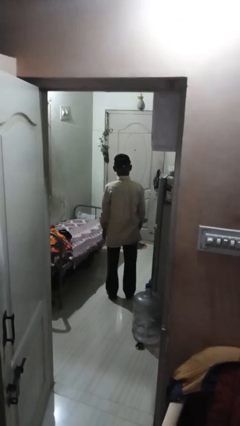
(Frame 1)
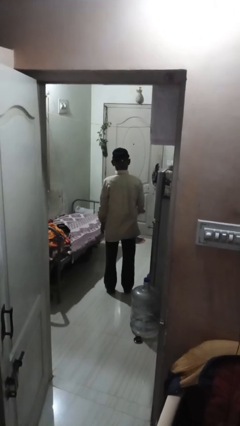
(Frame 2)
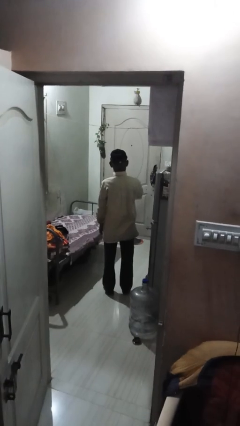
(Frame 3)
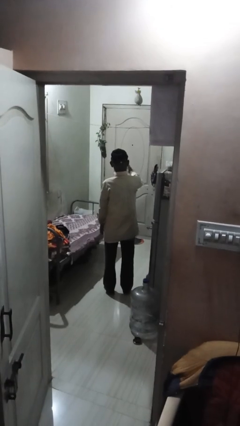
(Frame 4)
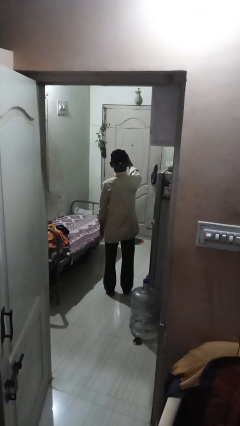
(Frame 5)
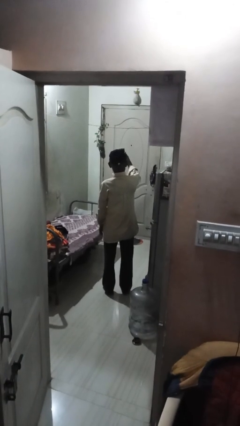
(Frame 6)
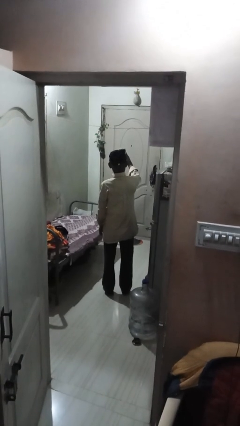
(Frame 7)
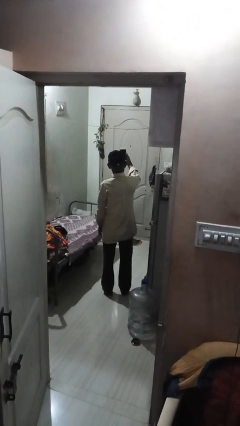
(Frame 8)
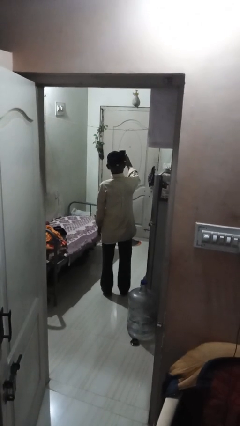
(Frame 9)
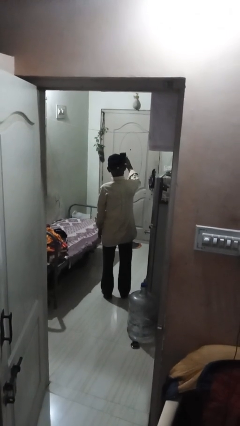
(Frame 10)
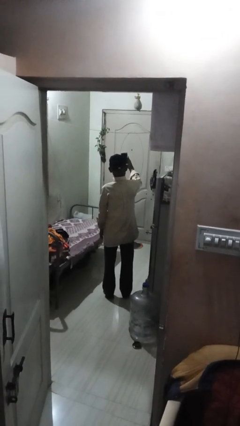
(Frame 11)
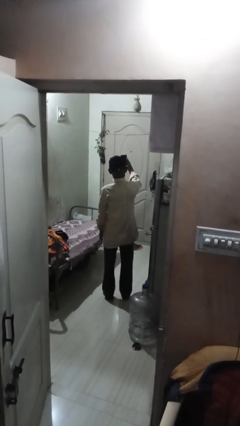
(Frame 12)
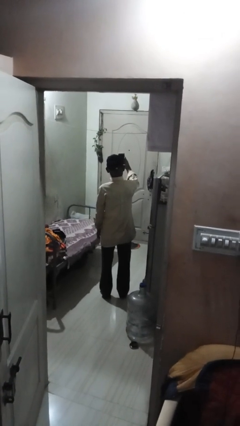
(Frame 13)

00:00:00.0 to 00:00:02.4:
person takes selfie

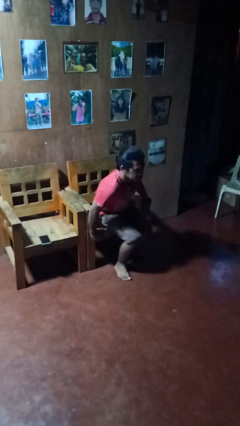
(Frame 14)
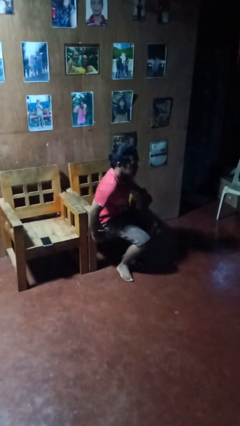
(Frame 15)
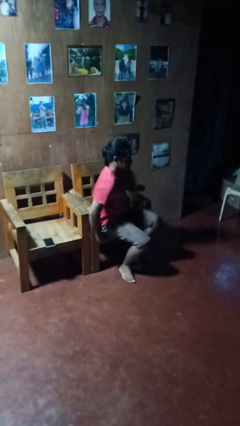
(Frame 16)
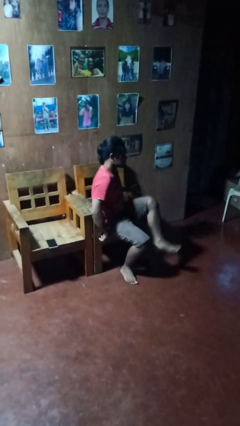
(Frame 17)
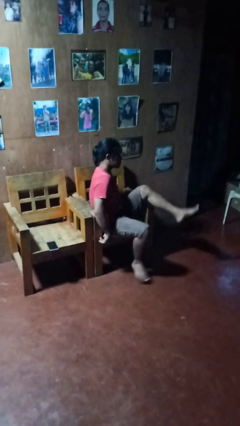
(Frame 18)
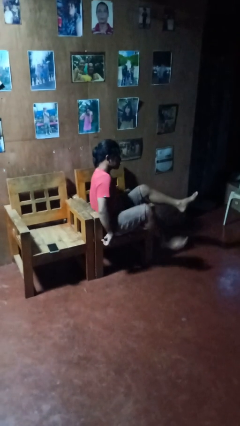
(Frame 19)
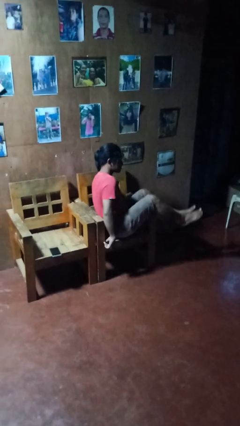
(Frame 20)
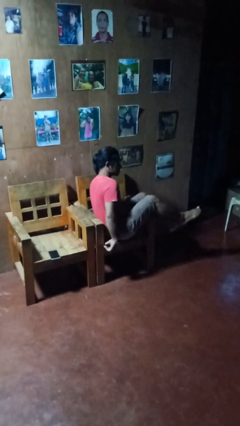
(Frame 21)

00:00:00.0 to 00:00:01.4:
person sits down

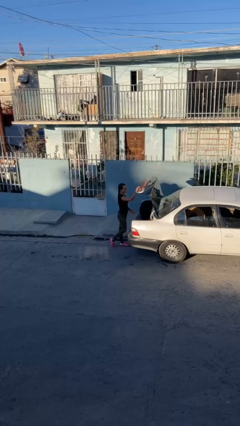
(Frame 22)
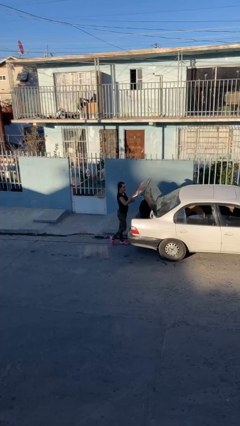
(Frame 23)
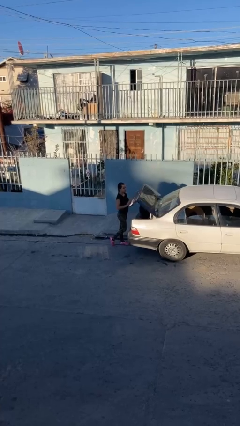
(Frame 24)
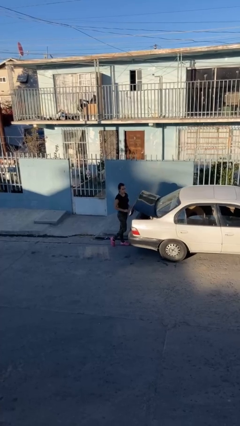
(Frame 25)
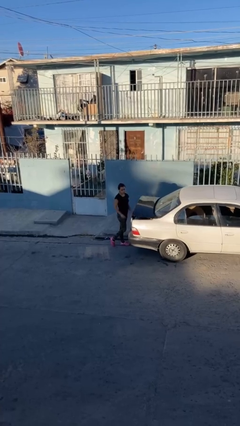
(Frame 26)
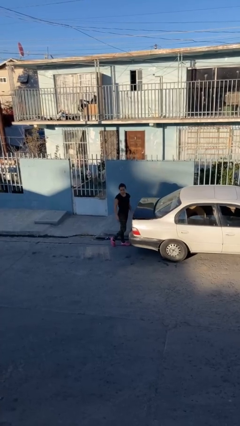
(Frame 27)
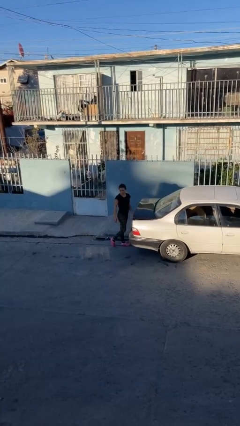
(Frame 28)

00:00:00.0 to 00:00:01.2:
person closes car trunk

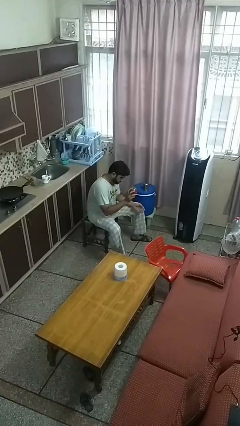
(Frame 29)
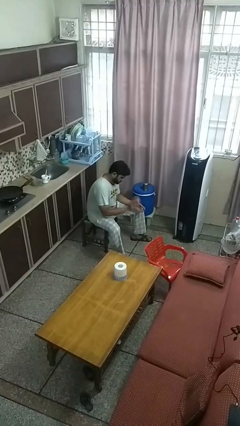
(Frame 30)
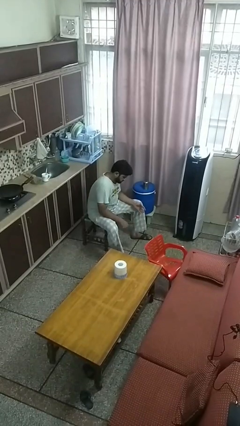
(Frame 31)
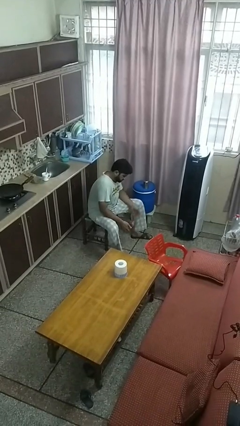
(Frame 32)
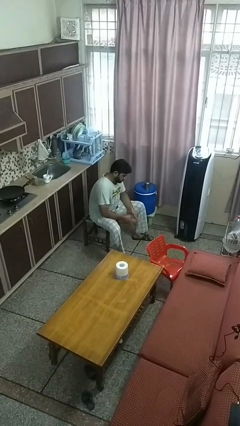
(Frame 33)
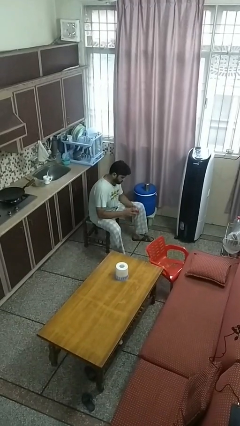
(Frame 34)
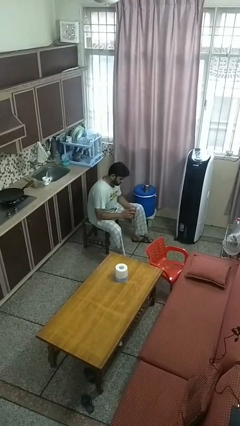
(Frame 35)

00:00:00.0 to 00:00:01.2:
person bounces ball on floor

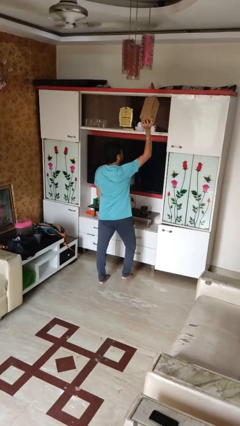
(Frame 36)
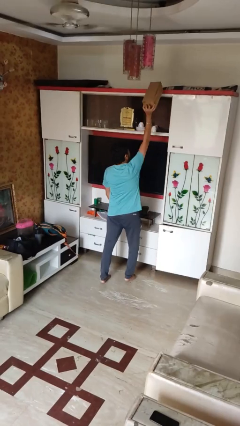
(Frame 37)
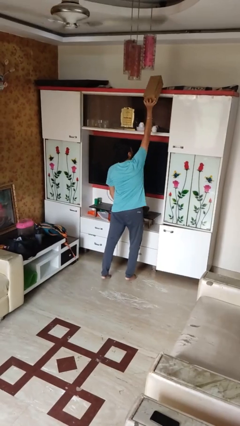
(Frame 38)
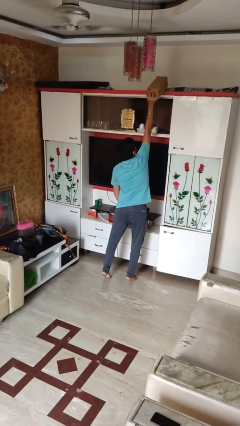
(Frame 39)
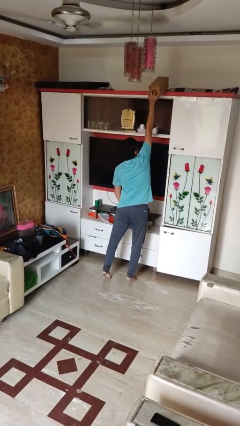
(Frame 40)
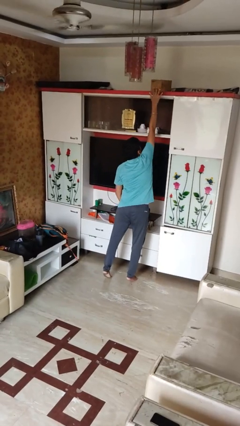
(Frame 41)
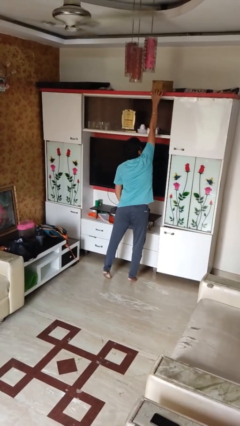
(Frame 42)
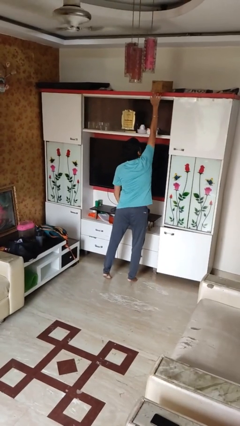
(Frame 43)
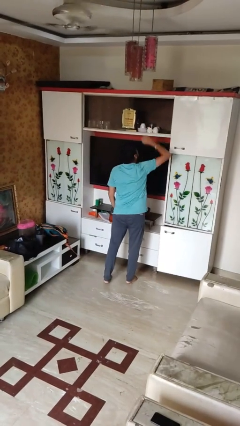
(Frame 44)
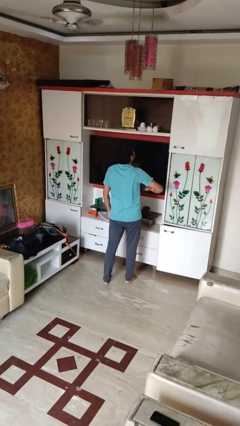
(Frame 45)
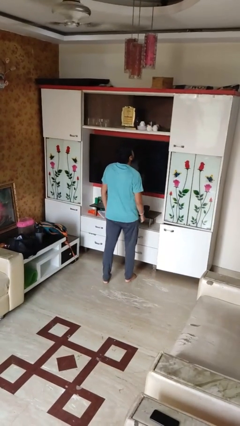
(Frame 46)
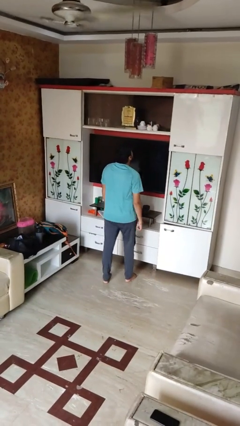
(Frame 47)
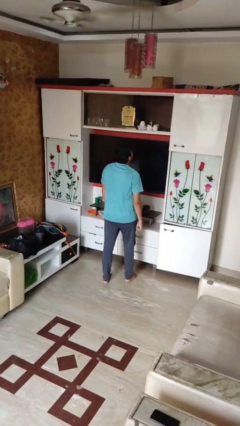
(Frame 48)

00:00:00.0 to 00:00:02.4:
person puts down object on shelf

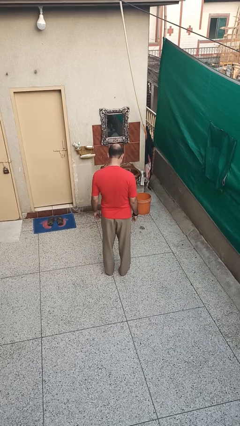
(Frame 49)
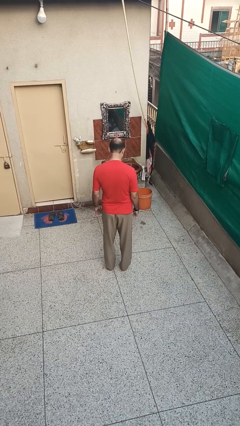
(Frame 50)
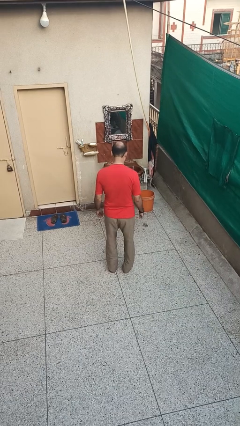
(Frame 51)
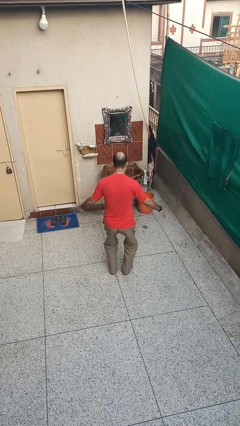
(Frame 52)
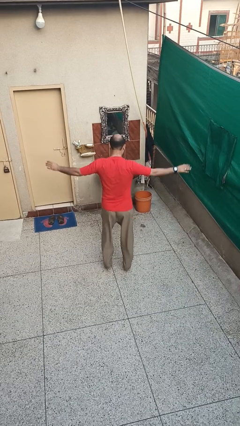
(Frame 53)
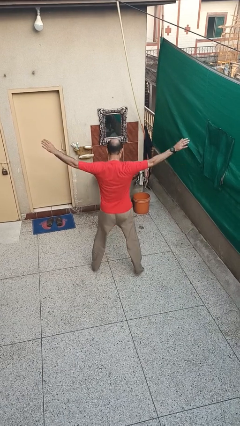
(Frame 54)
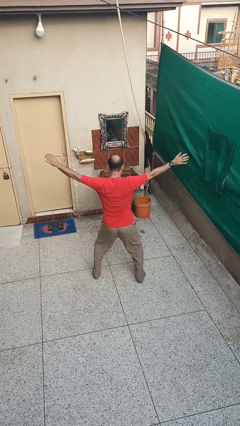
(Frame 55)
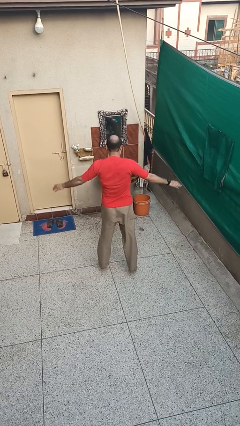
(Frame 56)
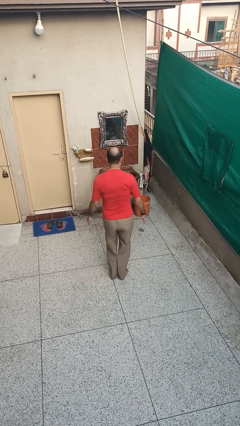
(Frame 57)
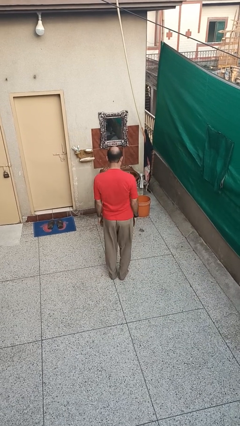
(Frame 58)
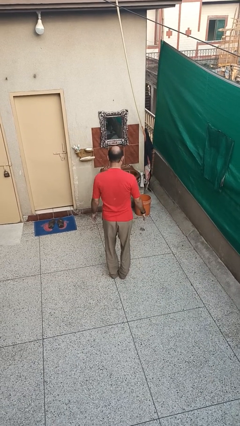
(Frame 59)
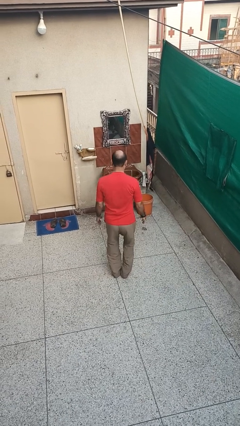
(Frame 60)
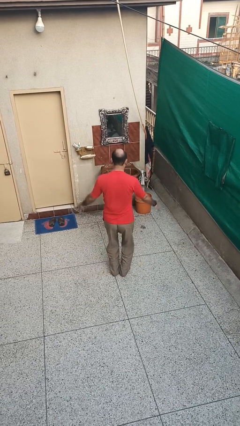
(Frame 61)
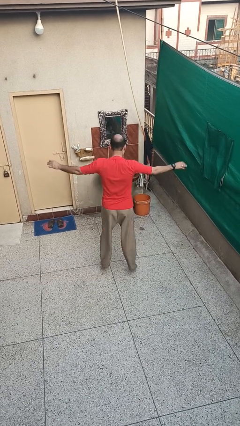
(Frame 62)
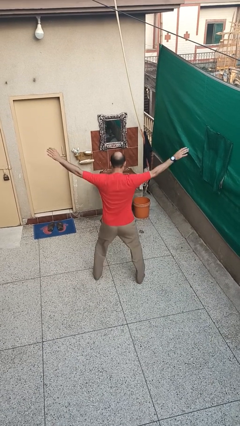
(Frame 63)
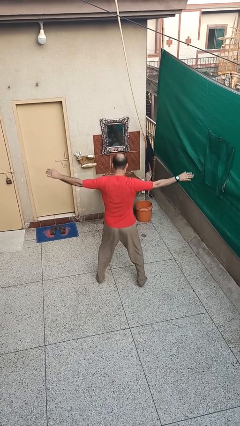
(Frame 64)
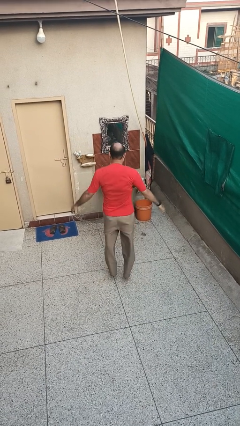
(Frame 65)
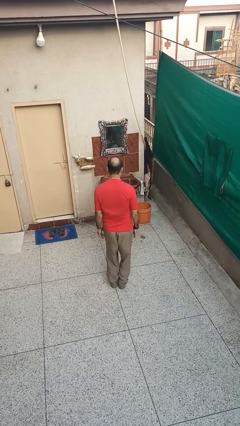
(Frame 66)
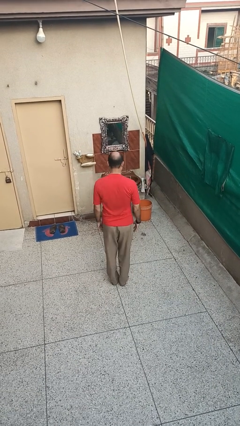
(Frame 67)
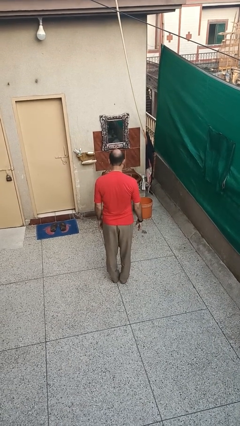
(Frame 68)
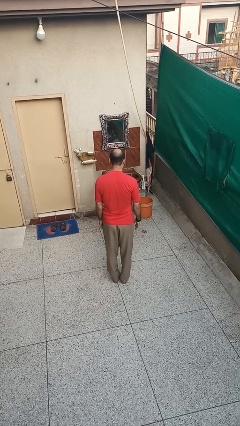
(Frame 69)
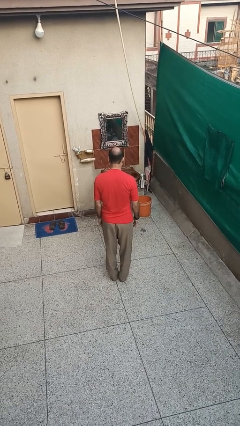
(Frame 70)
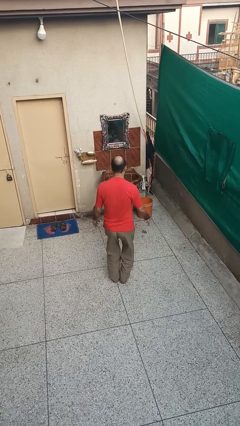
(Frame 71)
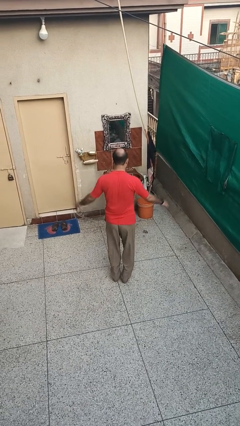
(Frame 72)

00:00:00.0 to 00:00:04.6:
person exercises with jumping jacks

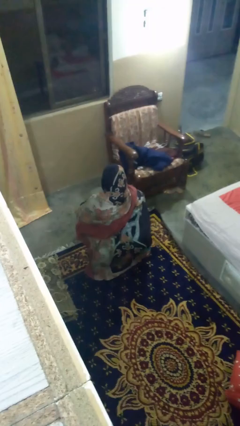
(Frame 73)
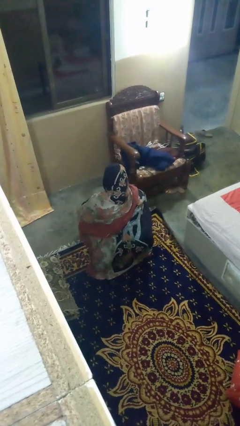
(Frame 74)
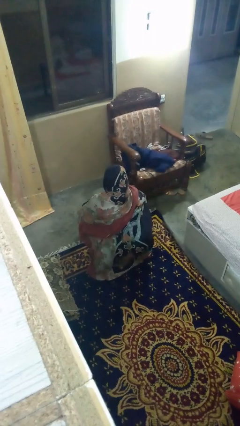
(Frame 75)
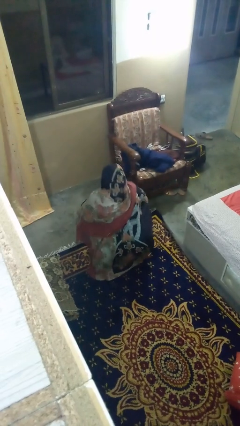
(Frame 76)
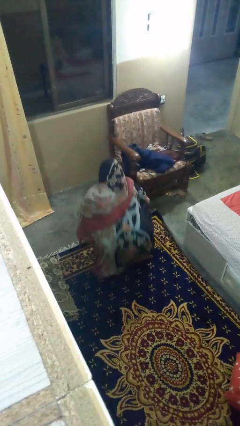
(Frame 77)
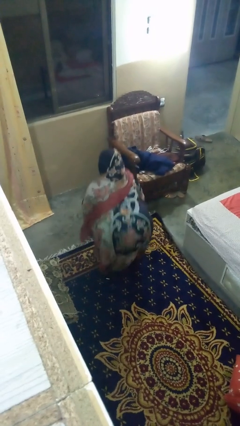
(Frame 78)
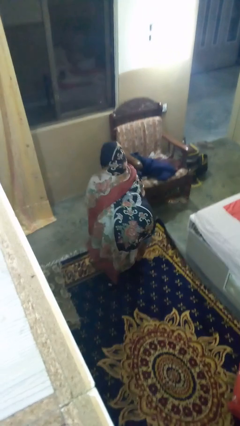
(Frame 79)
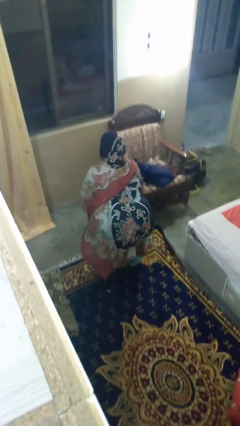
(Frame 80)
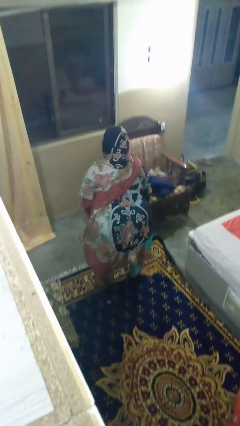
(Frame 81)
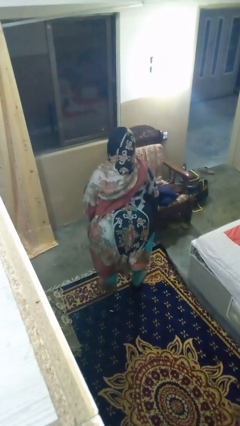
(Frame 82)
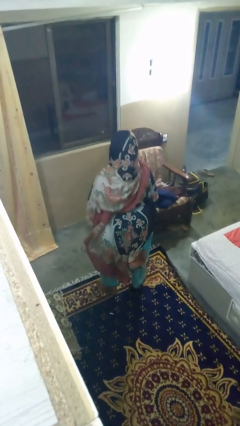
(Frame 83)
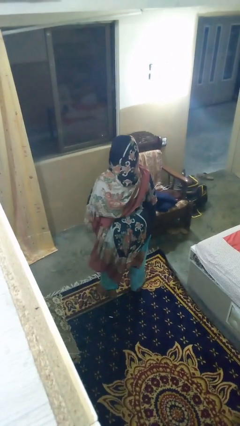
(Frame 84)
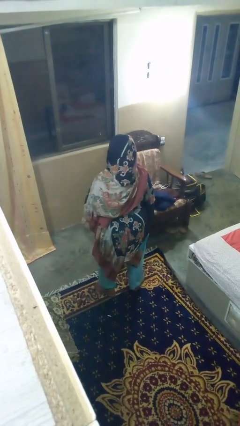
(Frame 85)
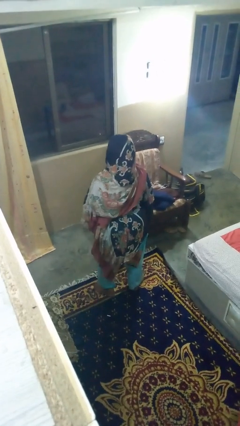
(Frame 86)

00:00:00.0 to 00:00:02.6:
person stands up

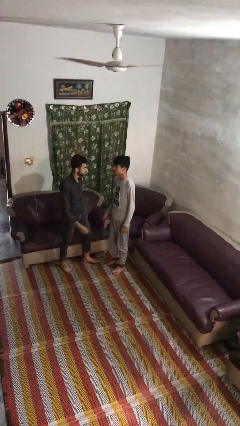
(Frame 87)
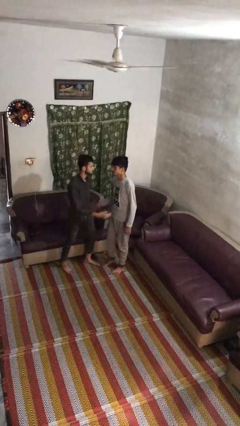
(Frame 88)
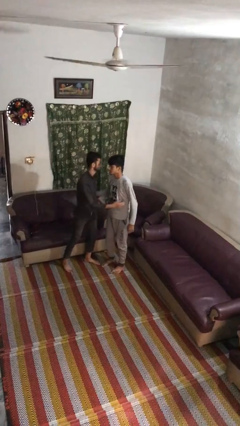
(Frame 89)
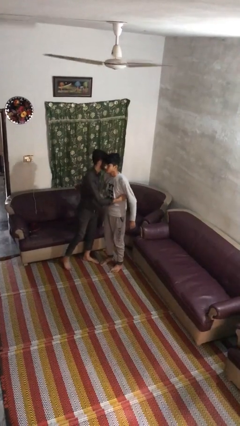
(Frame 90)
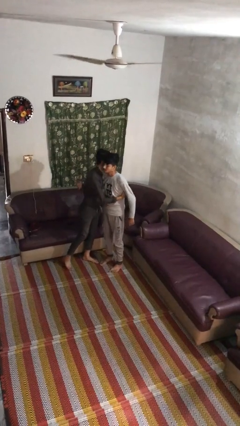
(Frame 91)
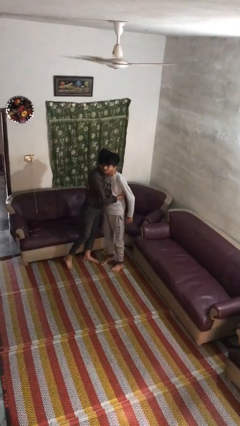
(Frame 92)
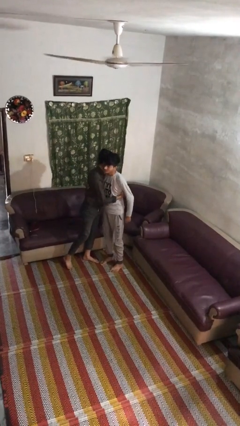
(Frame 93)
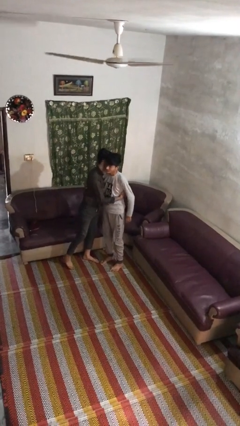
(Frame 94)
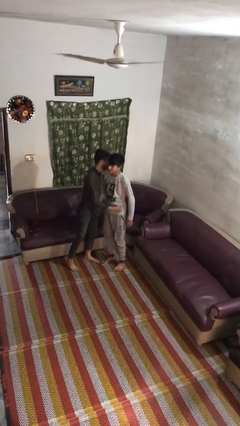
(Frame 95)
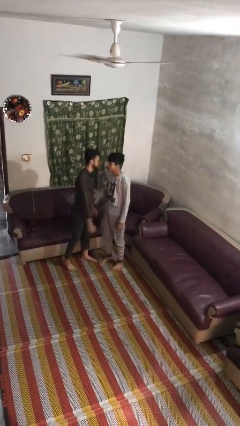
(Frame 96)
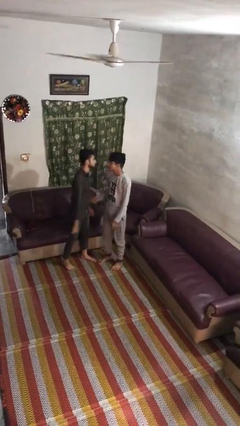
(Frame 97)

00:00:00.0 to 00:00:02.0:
person embraces person
